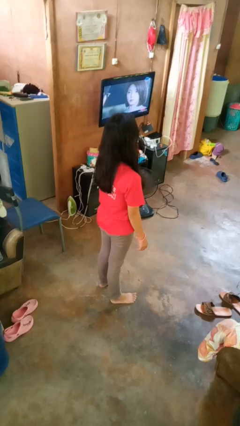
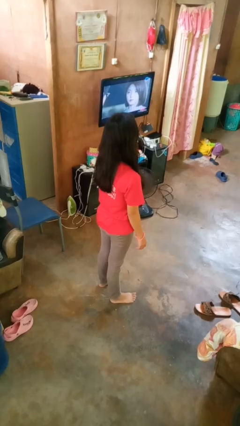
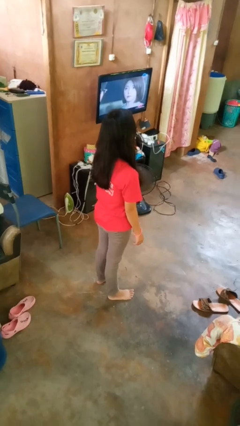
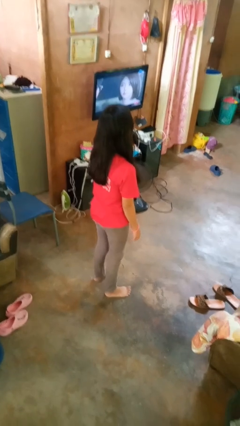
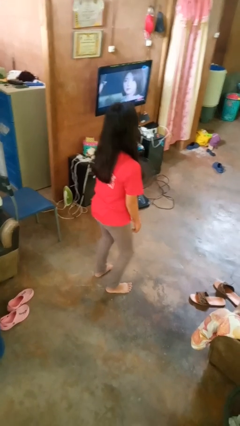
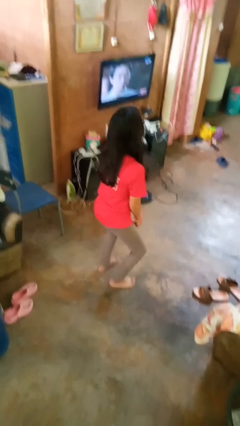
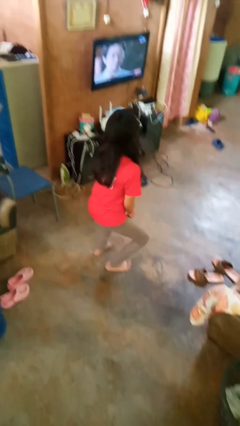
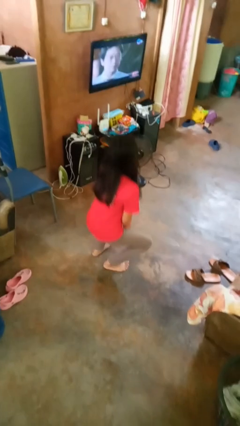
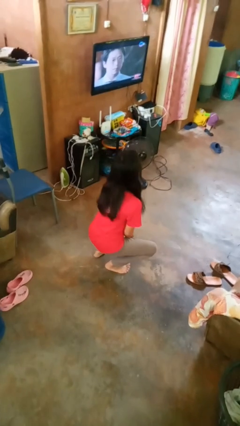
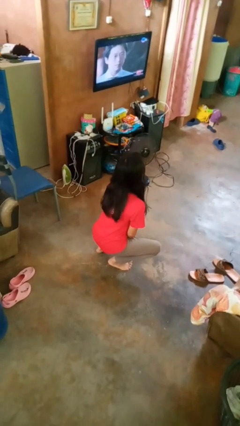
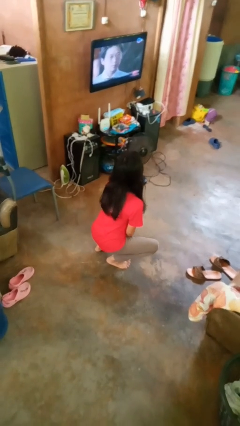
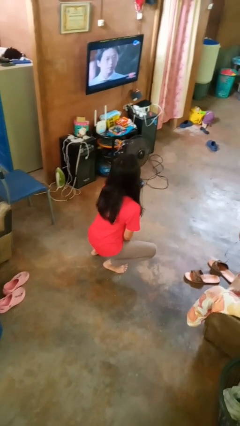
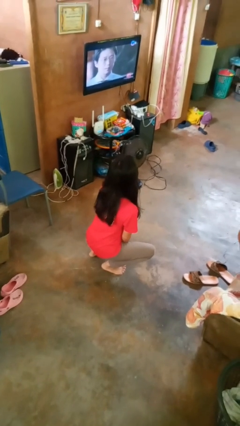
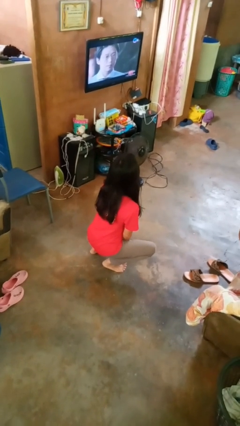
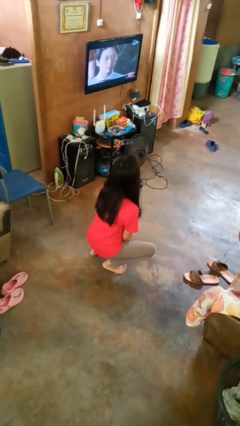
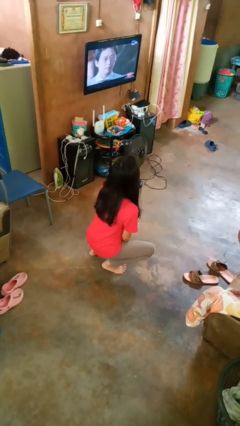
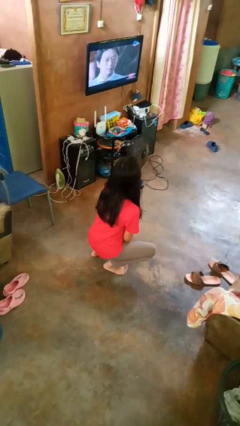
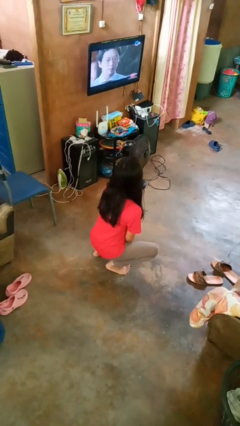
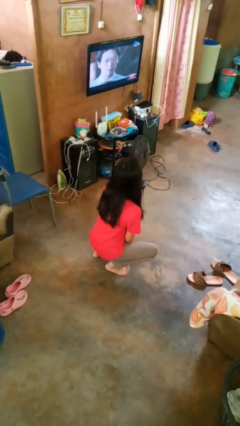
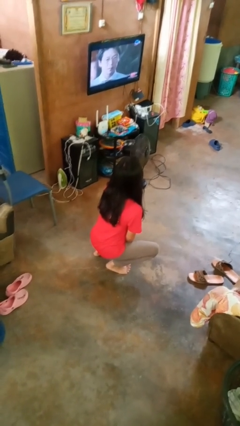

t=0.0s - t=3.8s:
person squats

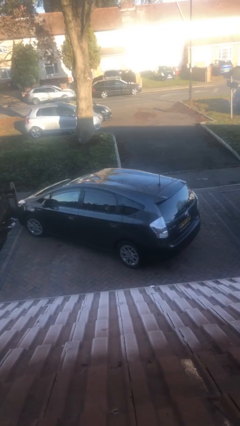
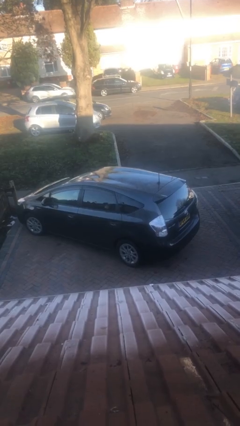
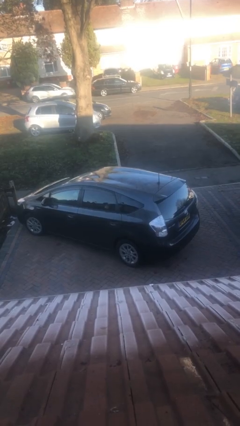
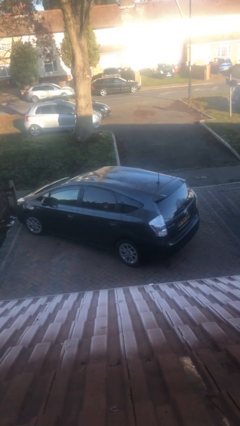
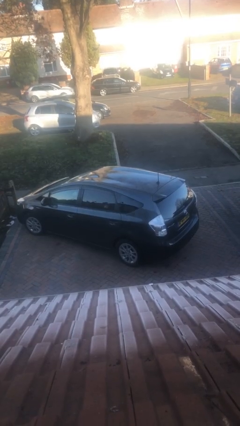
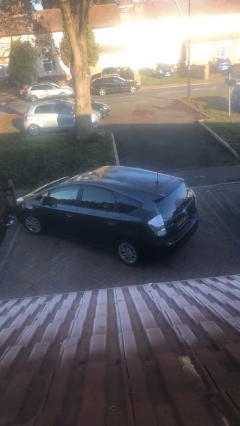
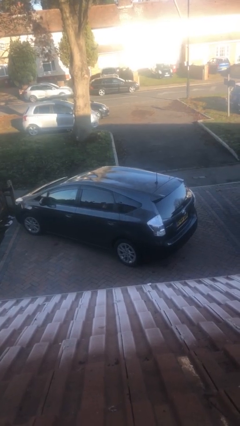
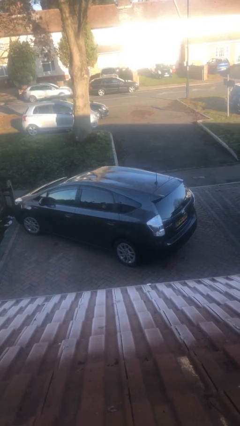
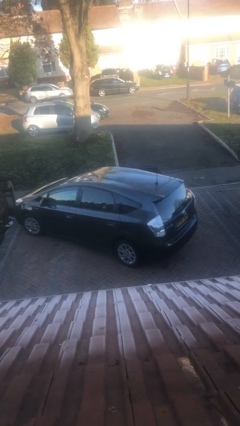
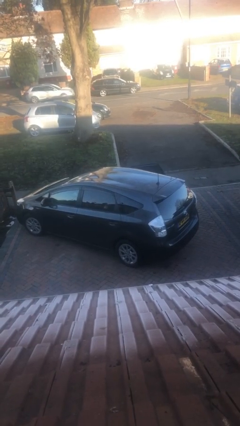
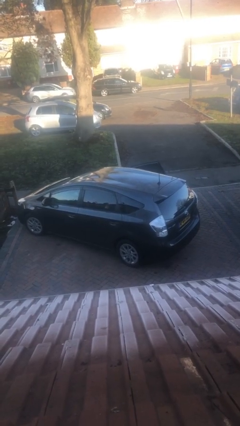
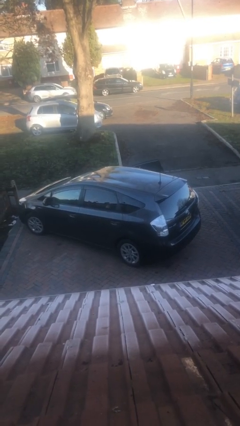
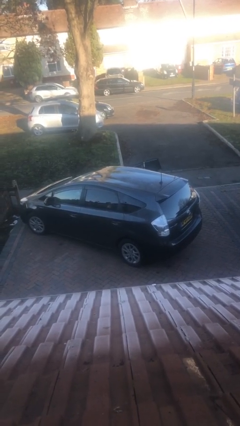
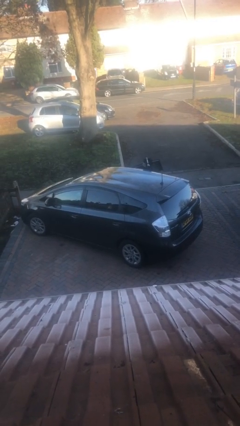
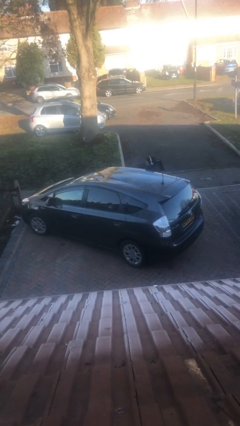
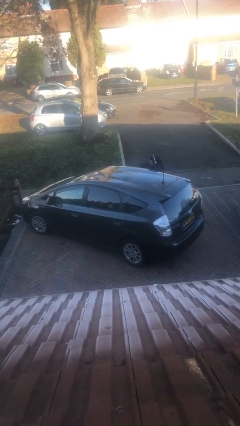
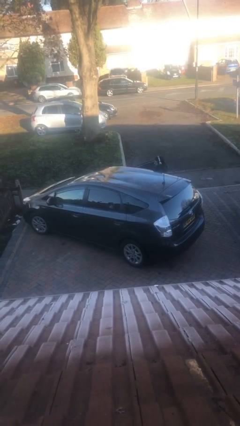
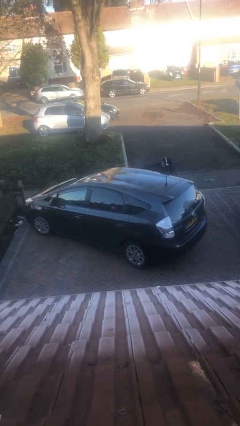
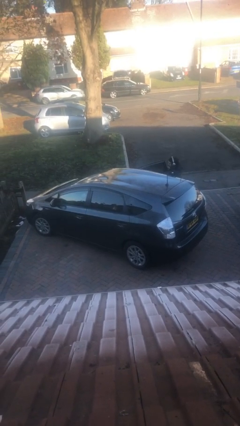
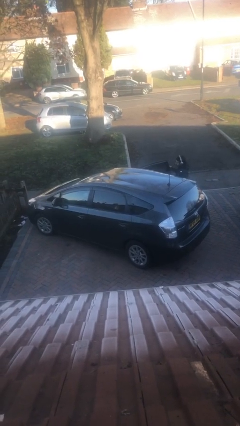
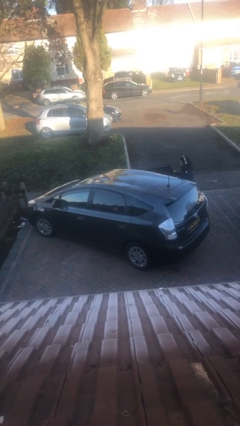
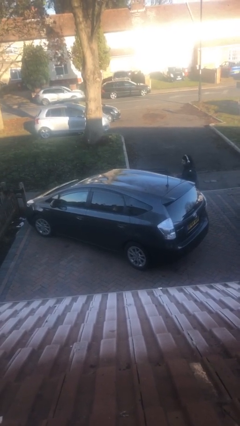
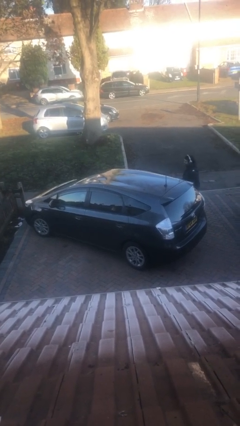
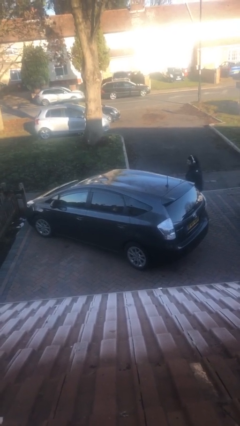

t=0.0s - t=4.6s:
car drops off person

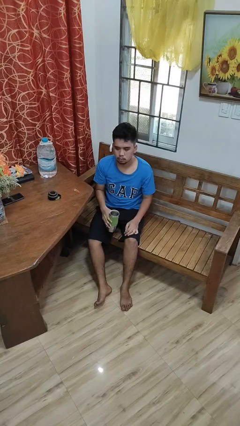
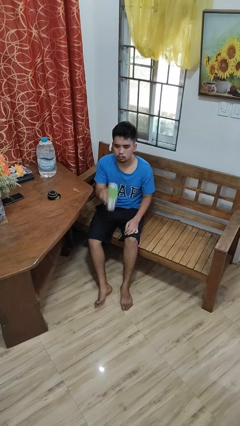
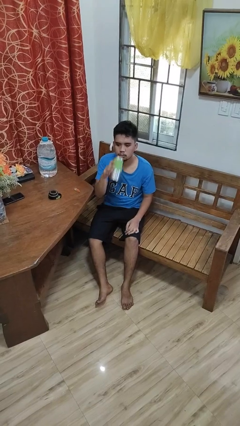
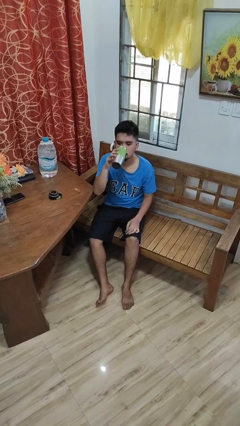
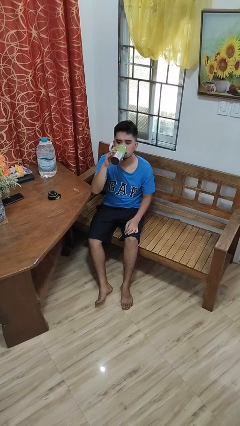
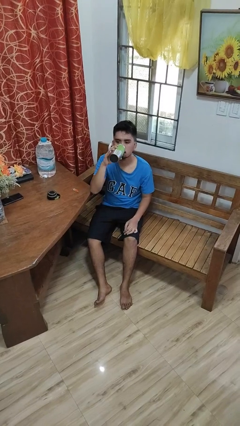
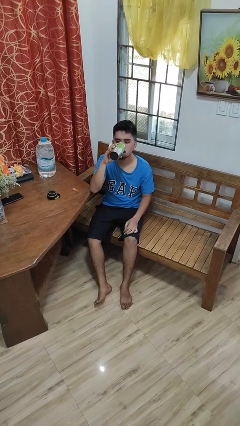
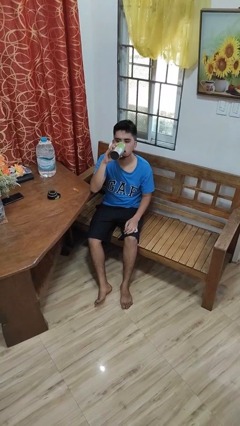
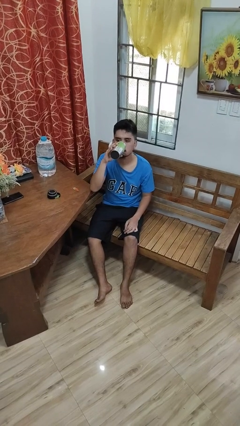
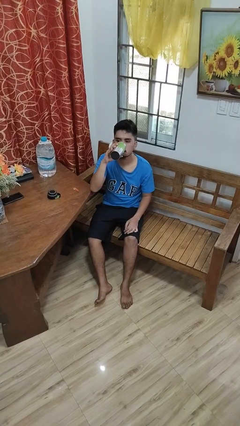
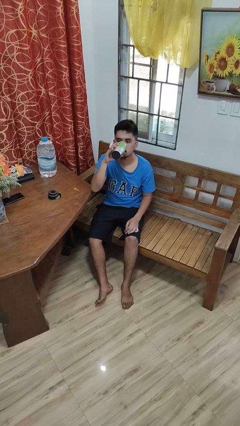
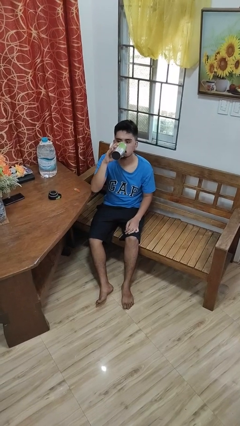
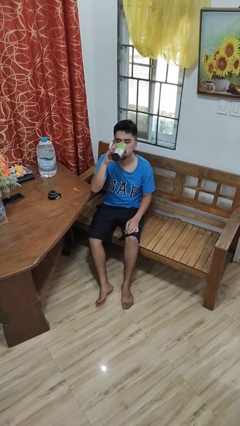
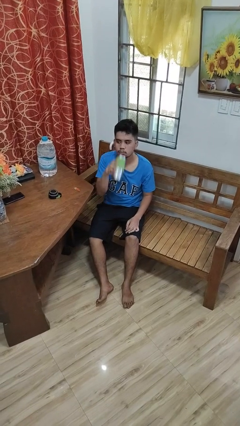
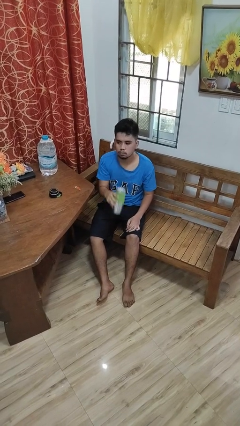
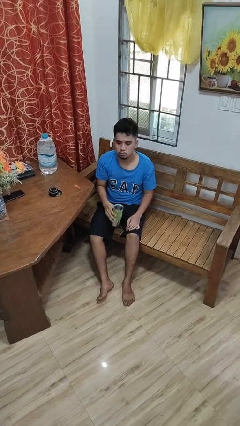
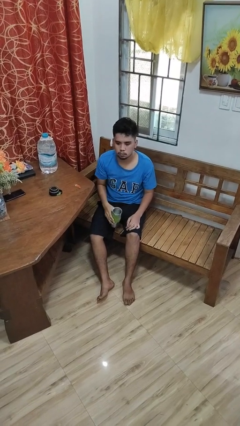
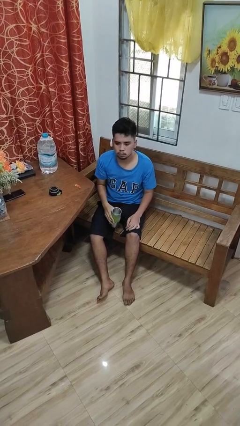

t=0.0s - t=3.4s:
person drinks from bottle

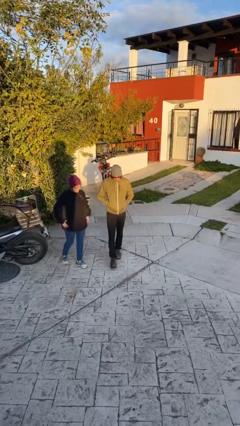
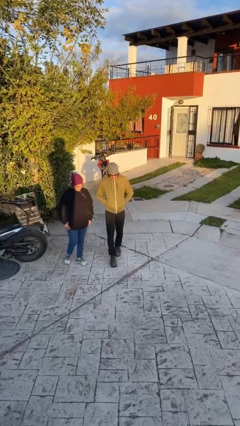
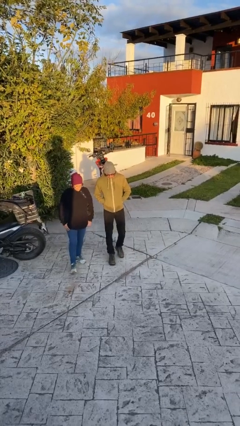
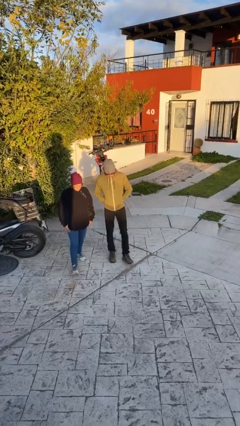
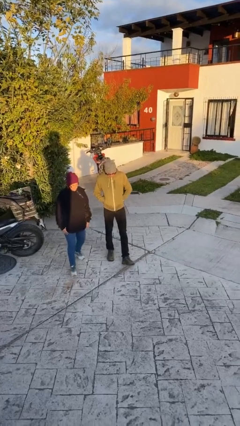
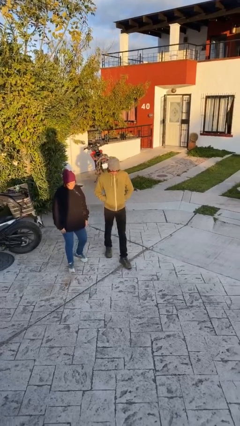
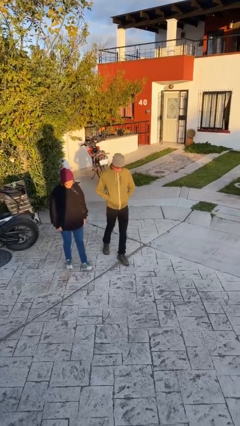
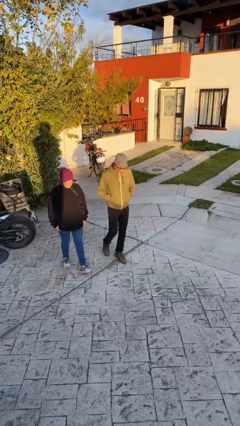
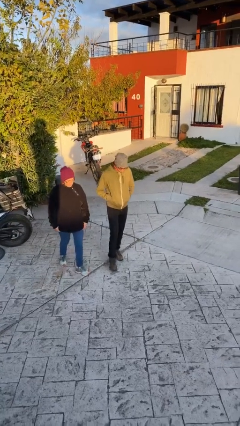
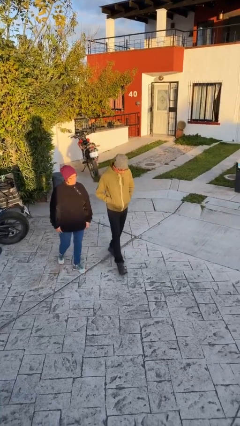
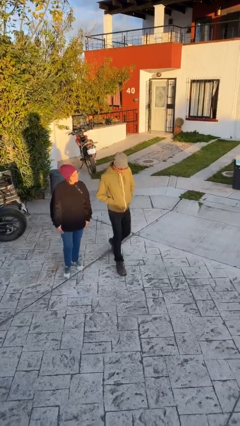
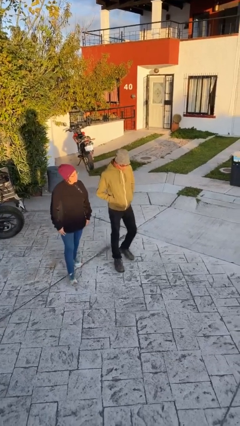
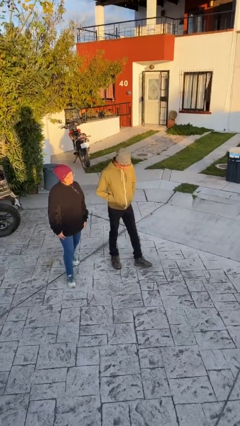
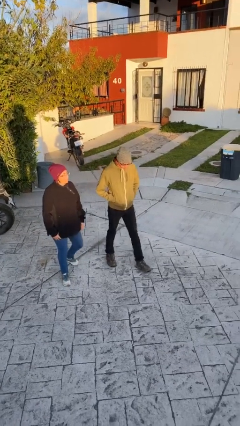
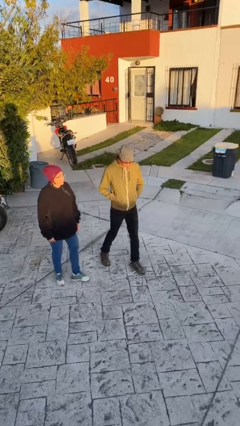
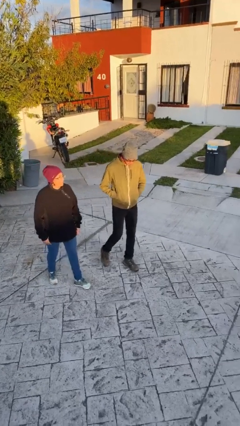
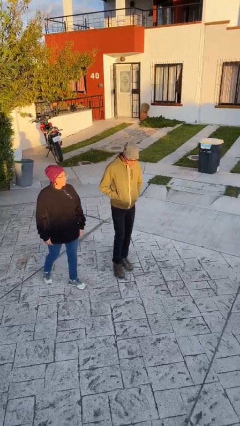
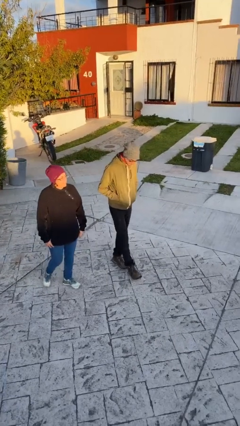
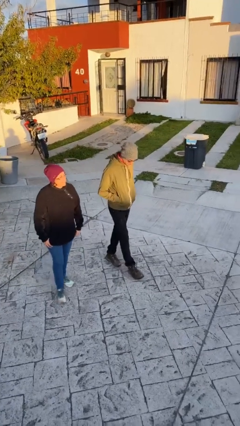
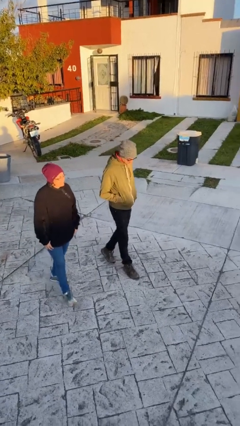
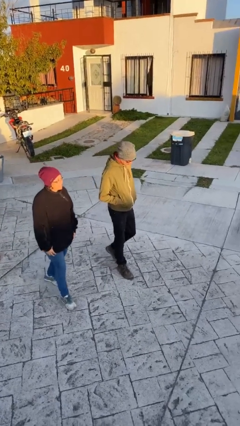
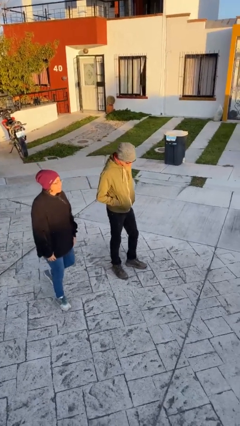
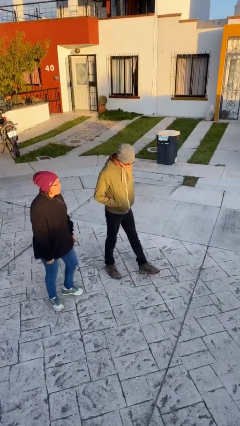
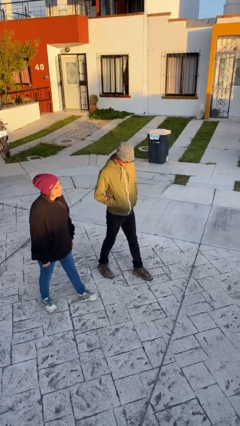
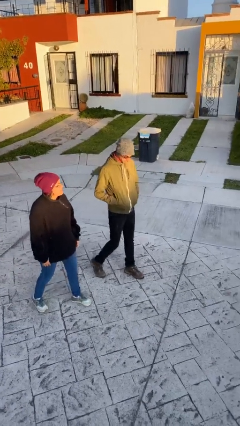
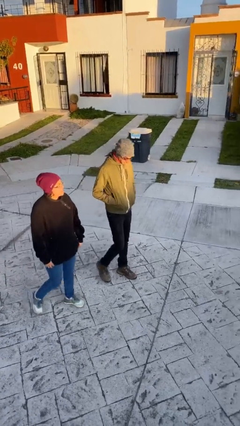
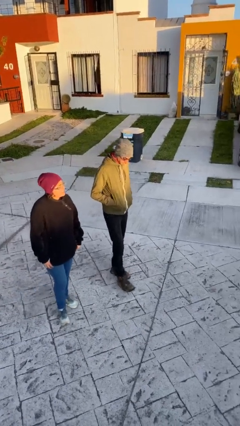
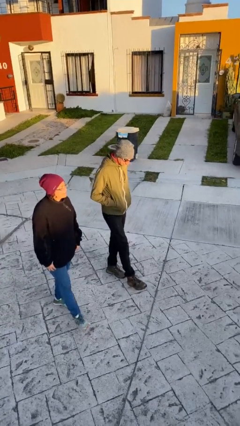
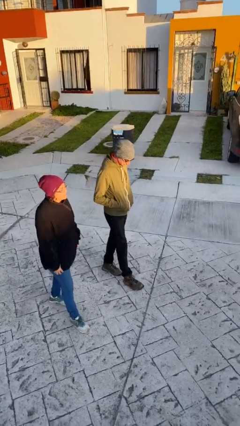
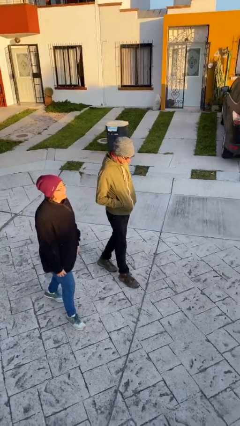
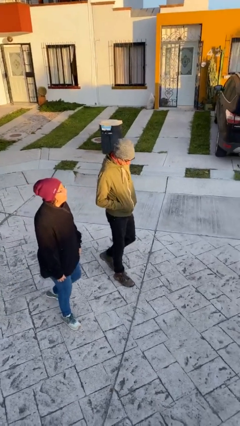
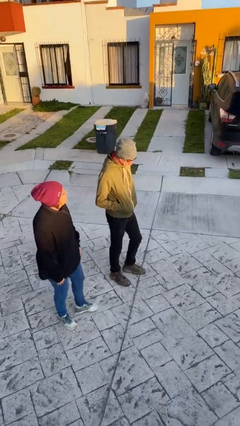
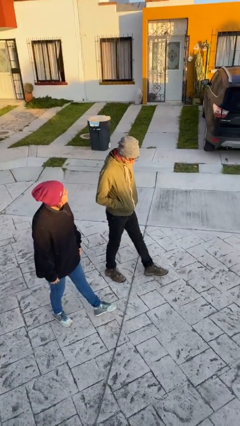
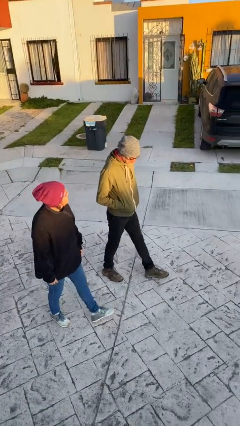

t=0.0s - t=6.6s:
person talks to person
